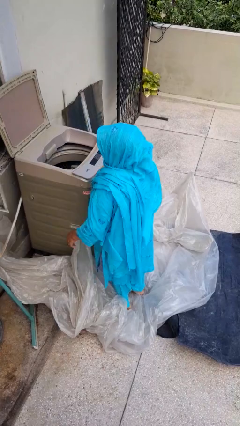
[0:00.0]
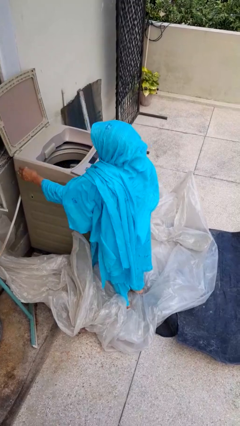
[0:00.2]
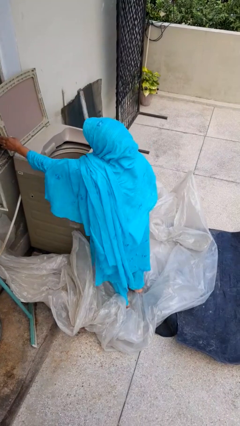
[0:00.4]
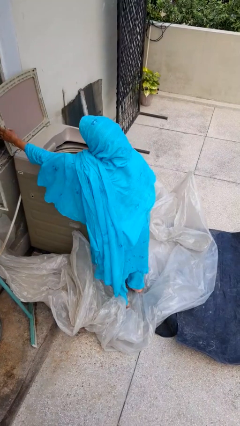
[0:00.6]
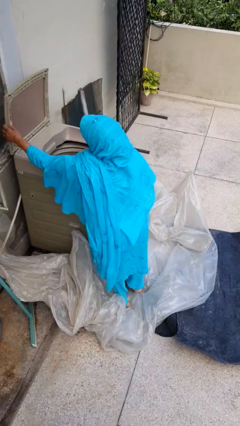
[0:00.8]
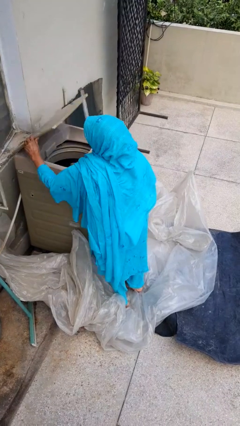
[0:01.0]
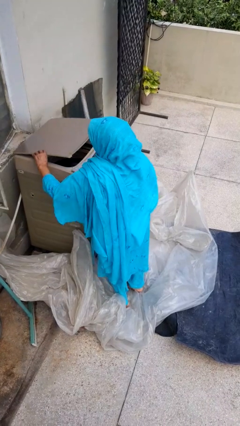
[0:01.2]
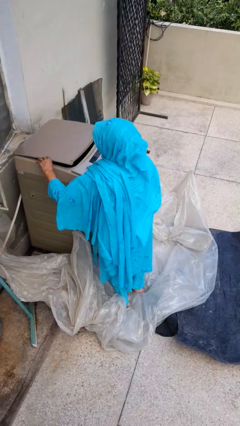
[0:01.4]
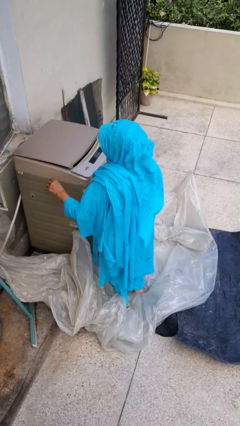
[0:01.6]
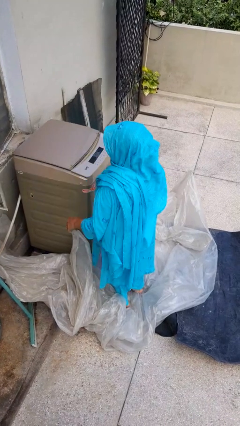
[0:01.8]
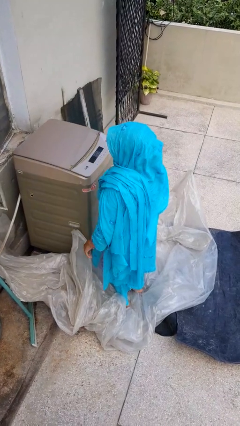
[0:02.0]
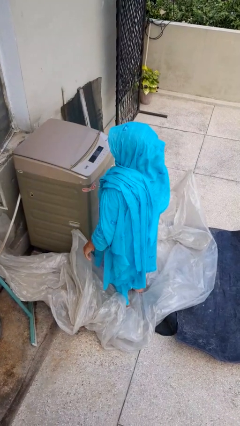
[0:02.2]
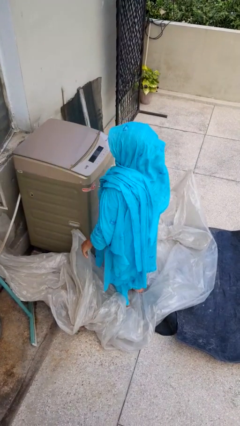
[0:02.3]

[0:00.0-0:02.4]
person closes clothes washer

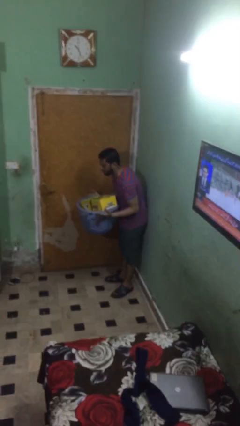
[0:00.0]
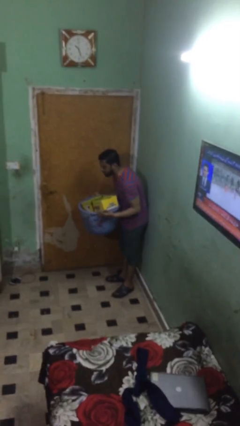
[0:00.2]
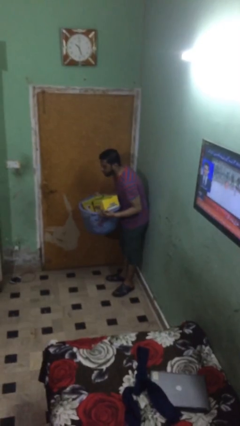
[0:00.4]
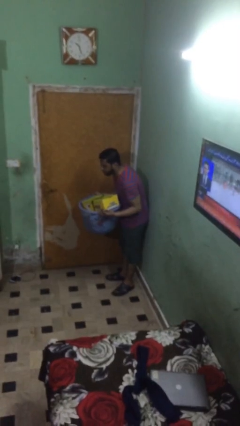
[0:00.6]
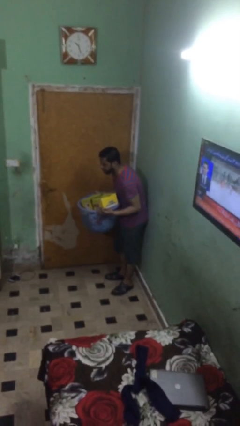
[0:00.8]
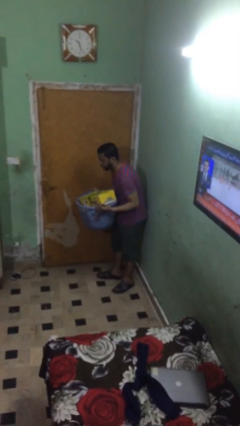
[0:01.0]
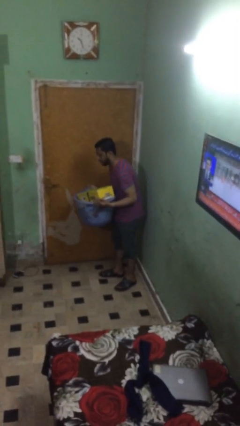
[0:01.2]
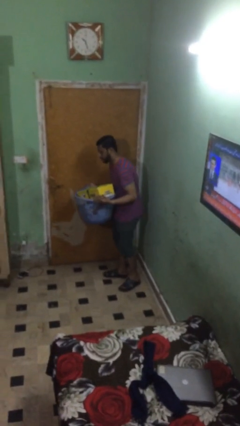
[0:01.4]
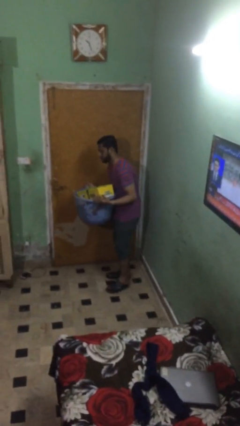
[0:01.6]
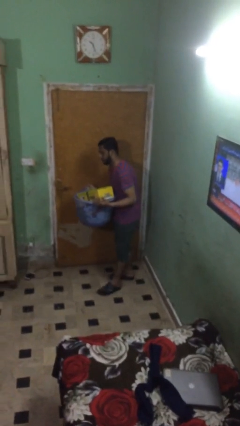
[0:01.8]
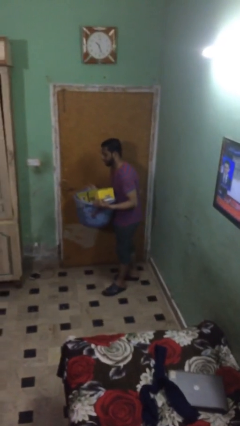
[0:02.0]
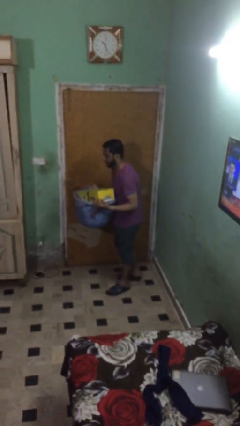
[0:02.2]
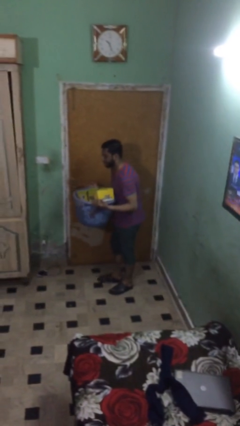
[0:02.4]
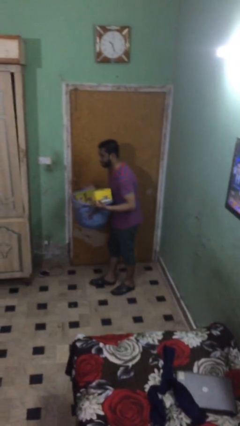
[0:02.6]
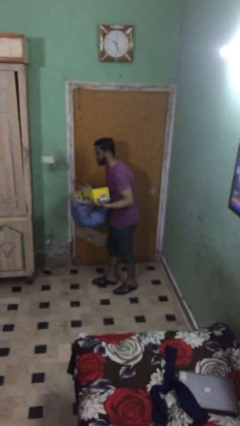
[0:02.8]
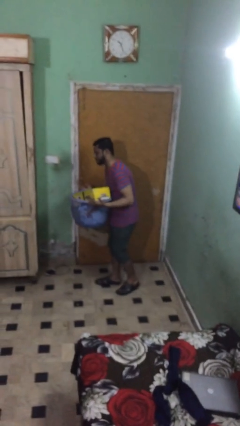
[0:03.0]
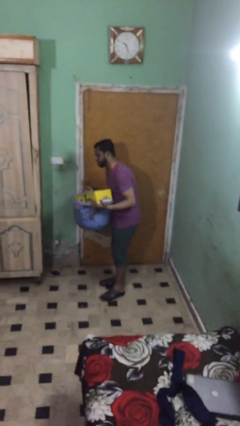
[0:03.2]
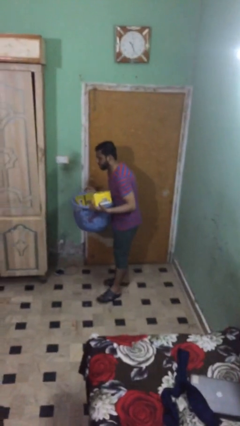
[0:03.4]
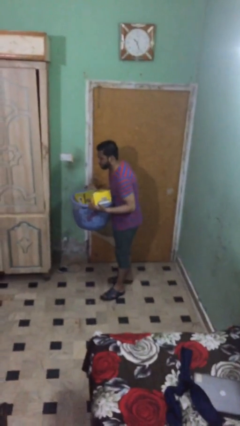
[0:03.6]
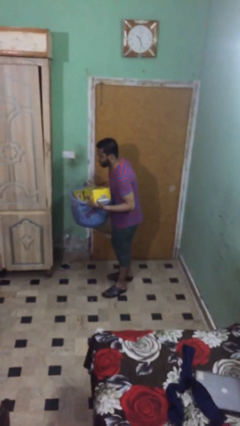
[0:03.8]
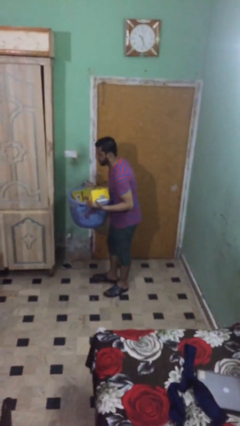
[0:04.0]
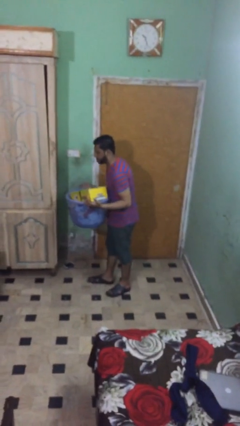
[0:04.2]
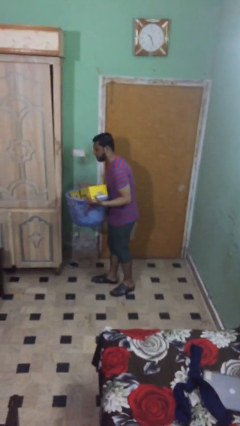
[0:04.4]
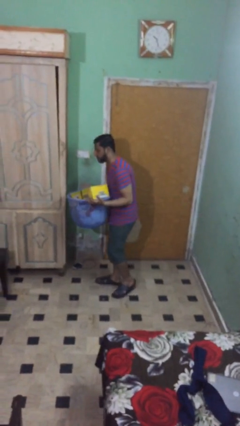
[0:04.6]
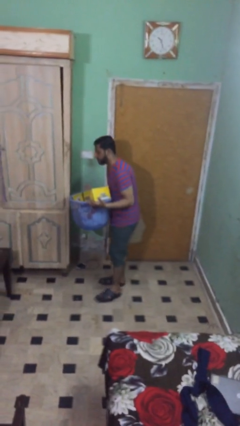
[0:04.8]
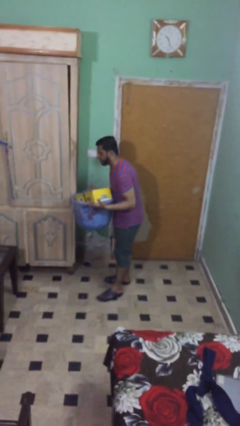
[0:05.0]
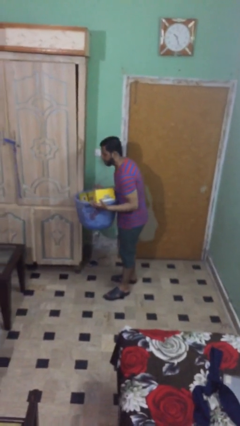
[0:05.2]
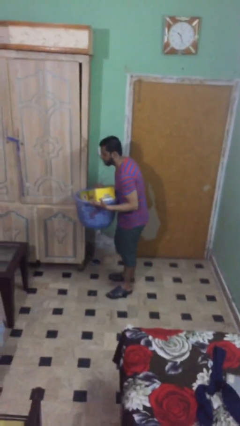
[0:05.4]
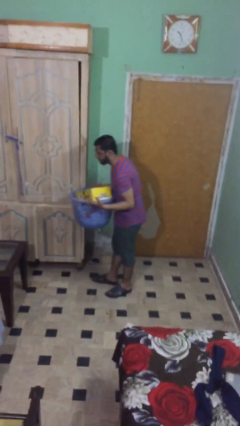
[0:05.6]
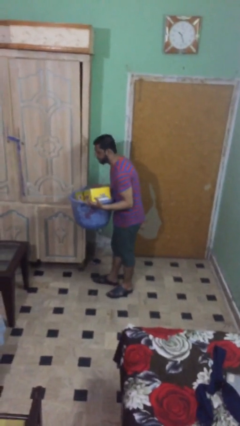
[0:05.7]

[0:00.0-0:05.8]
person carries heavy object

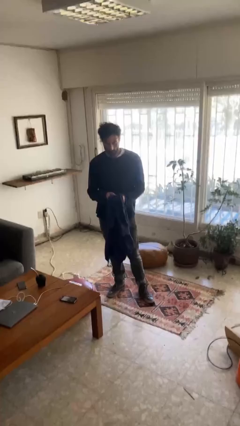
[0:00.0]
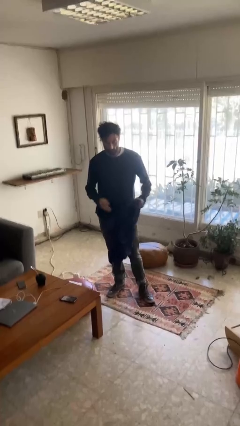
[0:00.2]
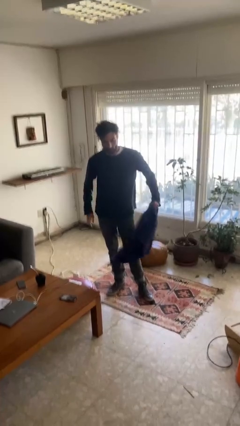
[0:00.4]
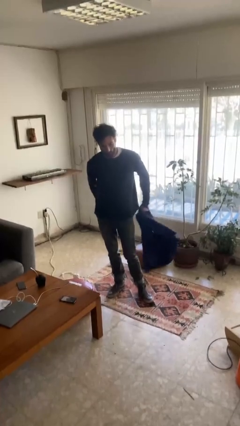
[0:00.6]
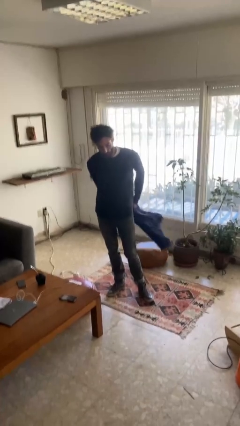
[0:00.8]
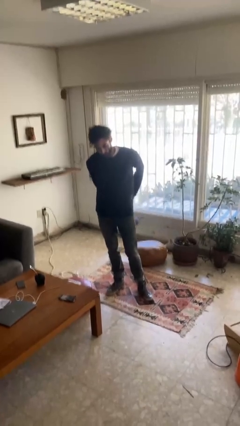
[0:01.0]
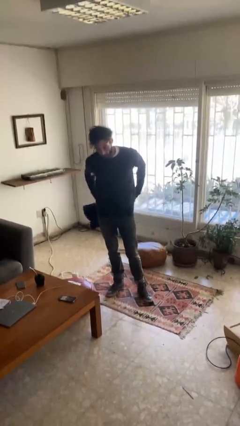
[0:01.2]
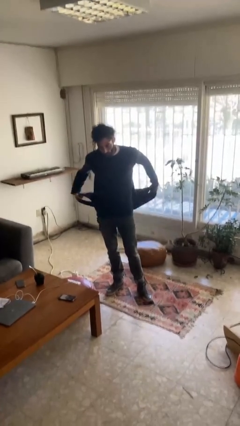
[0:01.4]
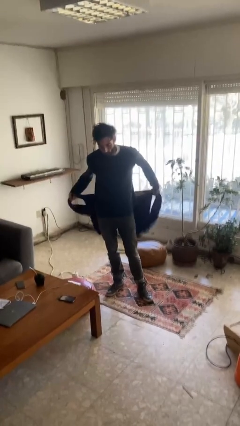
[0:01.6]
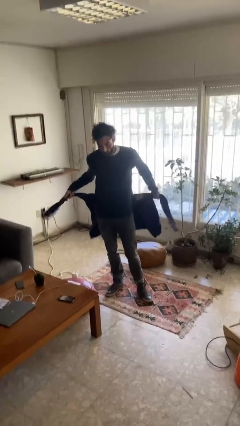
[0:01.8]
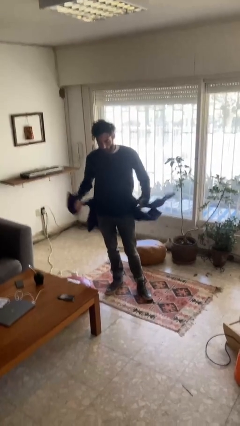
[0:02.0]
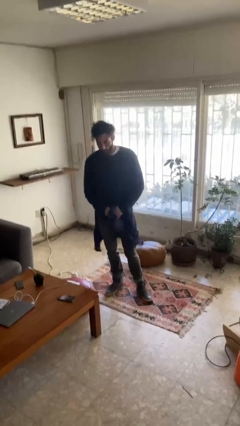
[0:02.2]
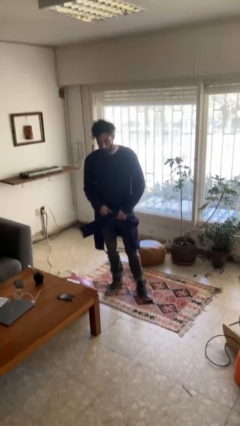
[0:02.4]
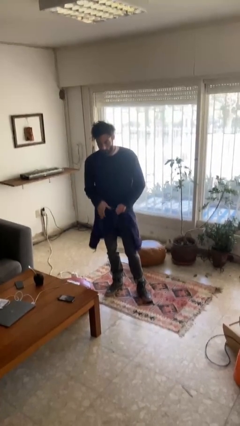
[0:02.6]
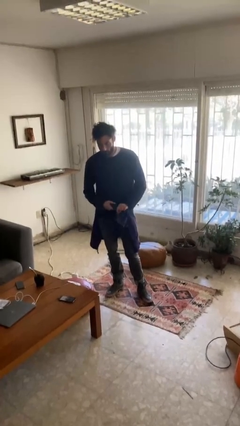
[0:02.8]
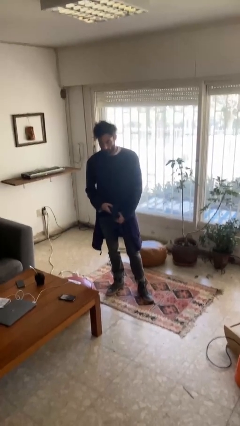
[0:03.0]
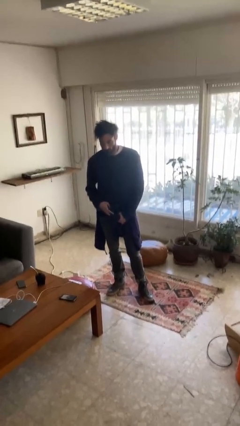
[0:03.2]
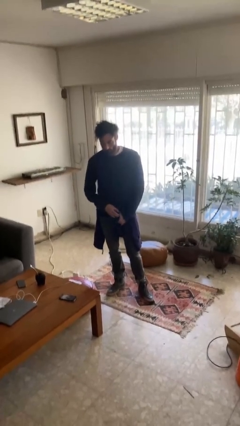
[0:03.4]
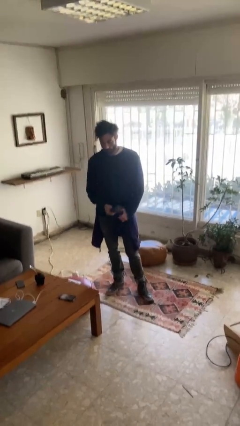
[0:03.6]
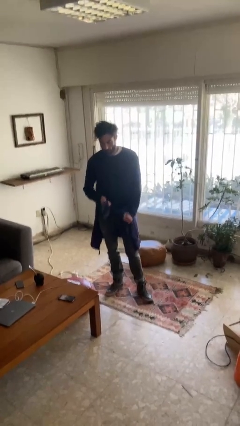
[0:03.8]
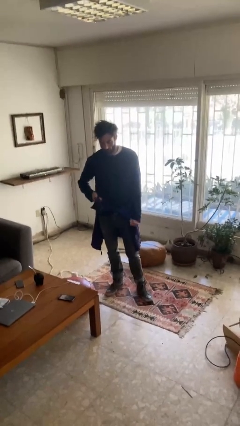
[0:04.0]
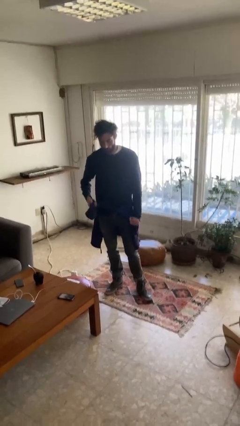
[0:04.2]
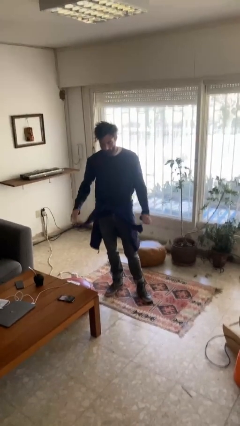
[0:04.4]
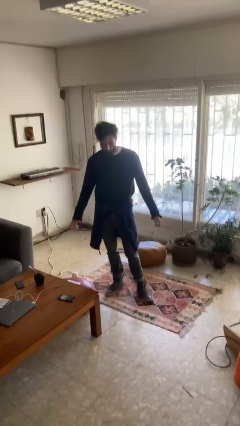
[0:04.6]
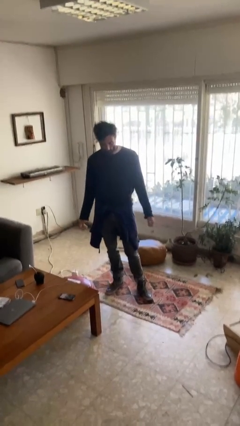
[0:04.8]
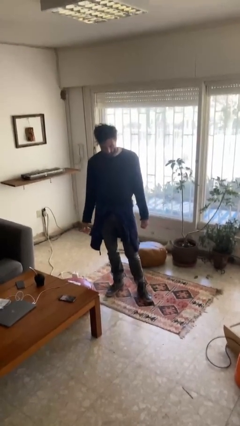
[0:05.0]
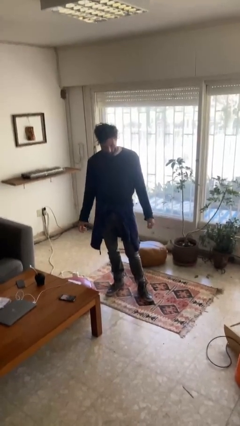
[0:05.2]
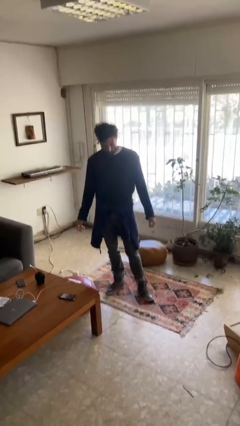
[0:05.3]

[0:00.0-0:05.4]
person ties jacket around waist

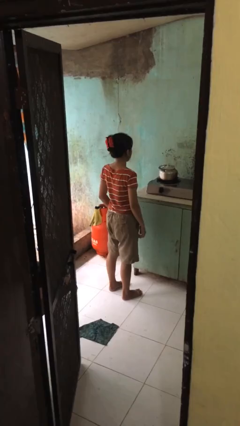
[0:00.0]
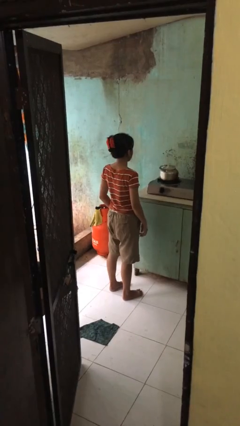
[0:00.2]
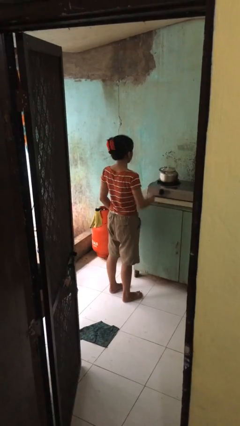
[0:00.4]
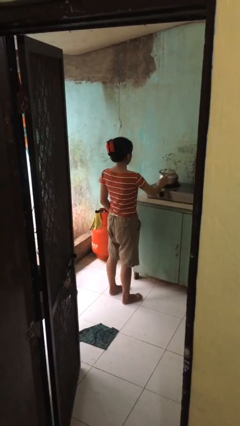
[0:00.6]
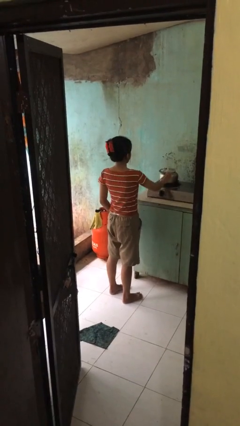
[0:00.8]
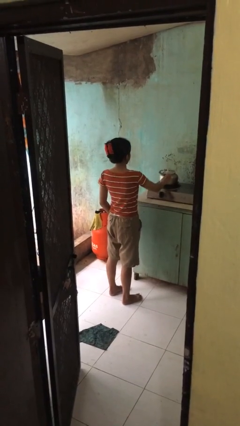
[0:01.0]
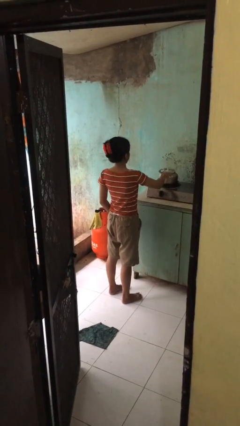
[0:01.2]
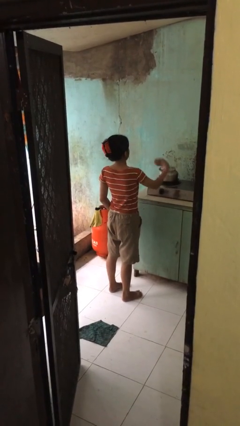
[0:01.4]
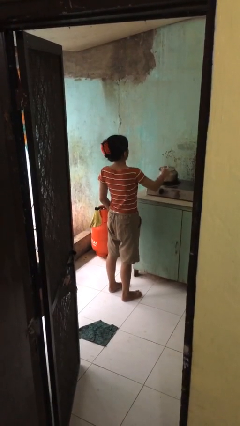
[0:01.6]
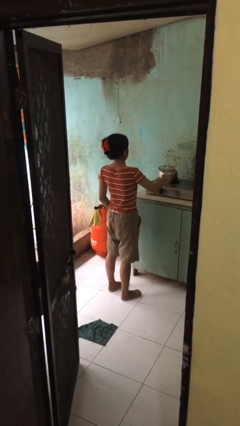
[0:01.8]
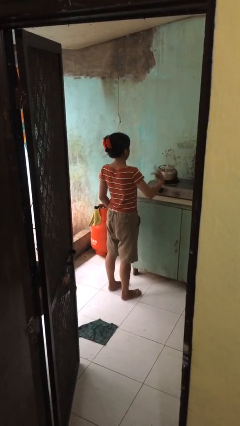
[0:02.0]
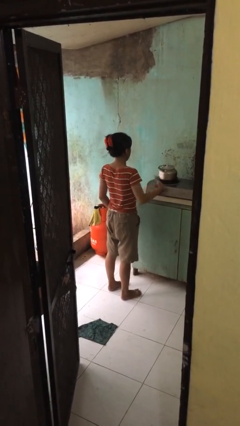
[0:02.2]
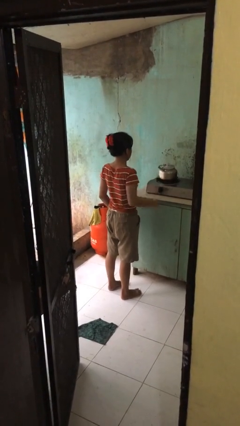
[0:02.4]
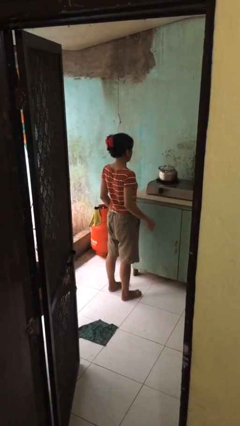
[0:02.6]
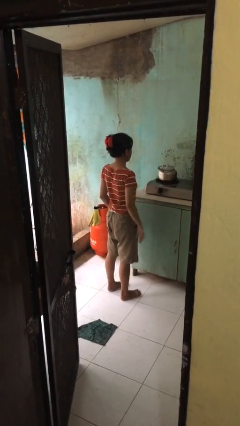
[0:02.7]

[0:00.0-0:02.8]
person burns hand

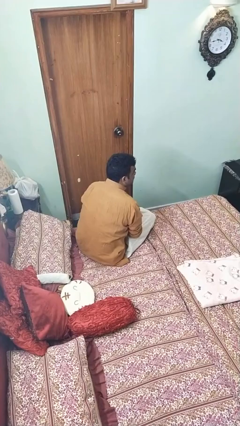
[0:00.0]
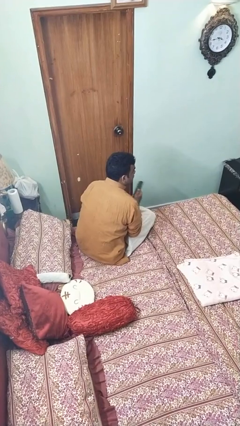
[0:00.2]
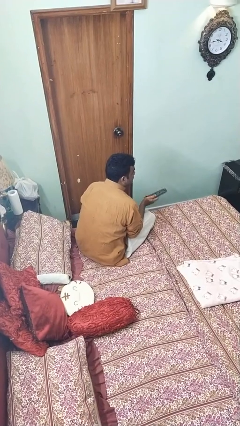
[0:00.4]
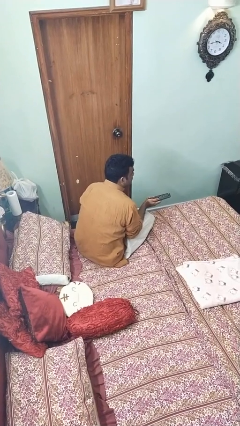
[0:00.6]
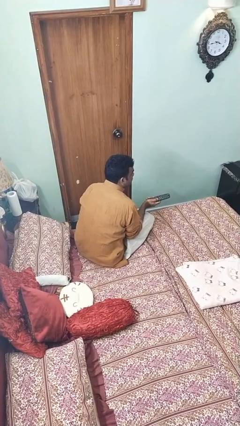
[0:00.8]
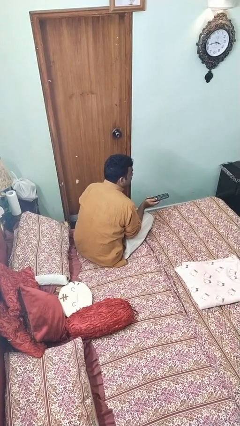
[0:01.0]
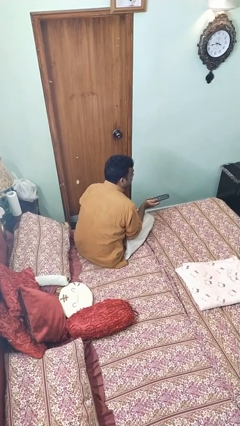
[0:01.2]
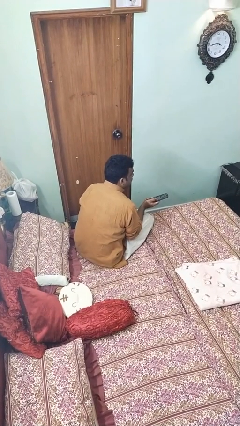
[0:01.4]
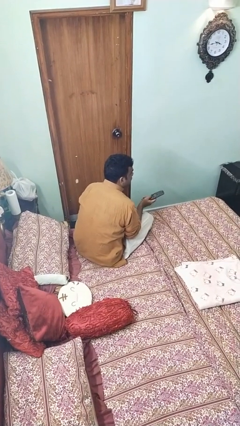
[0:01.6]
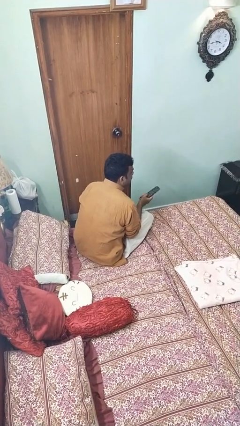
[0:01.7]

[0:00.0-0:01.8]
person uses television remote
